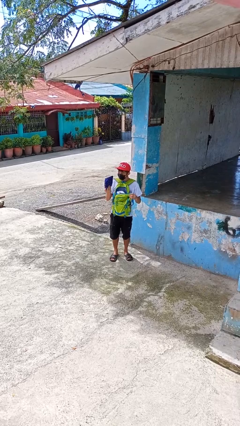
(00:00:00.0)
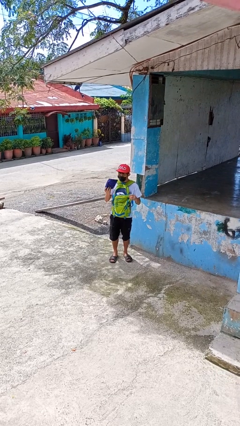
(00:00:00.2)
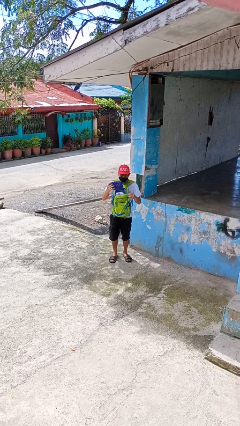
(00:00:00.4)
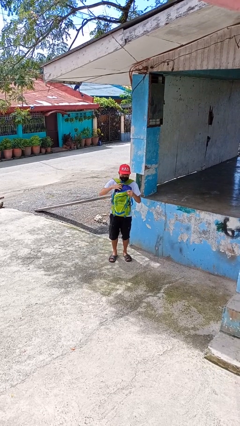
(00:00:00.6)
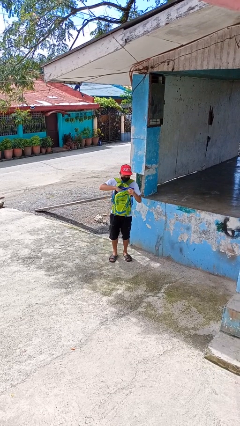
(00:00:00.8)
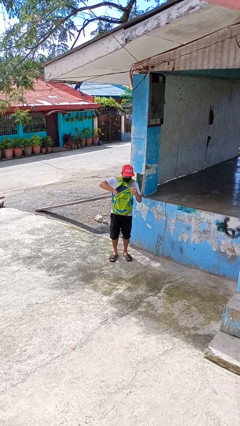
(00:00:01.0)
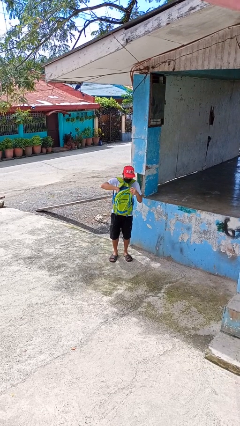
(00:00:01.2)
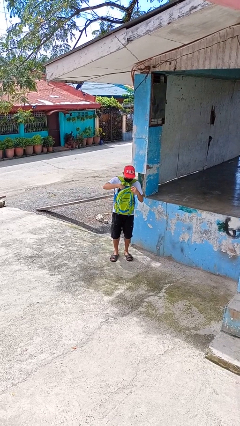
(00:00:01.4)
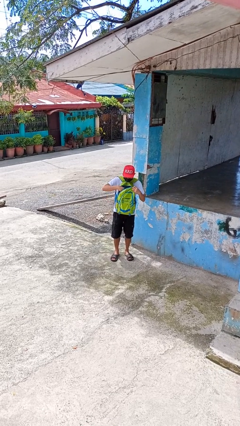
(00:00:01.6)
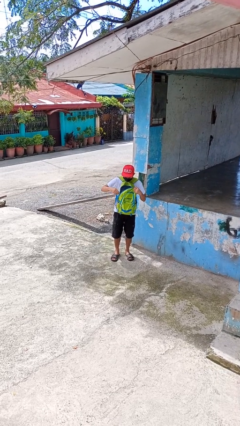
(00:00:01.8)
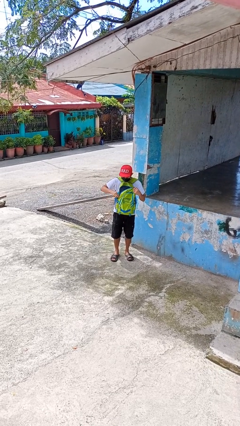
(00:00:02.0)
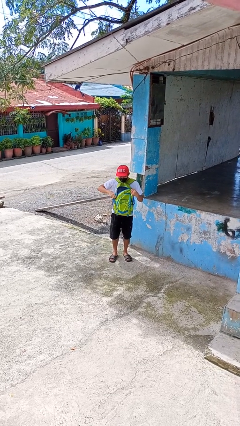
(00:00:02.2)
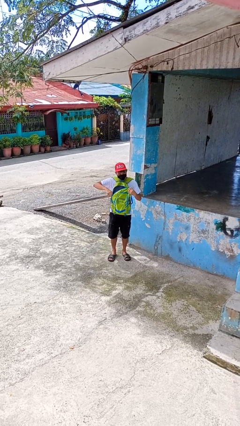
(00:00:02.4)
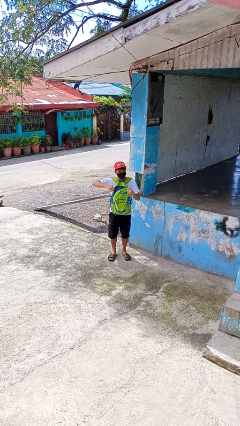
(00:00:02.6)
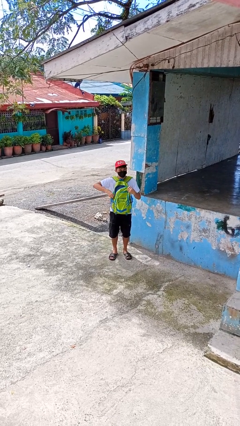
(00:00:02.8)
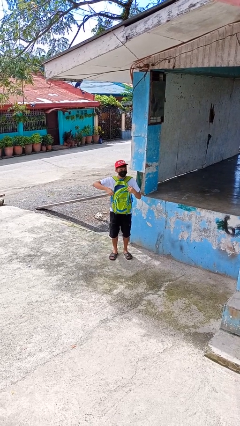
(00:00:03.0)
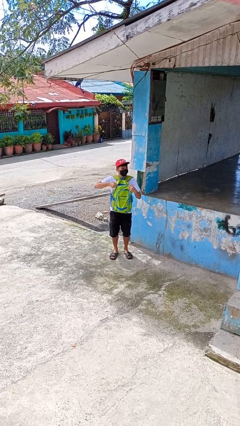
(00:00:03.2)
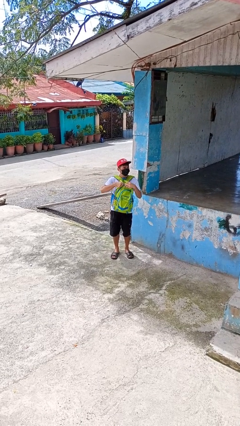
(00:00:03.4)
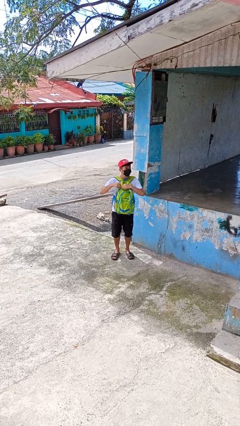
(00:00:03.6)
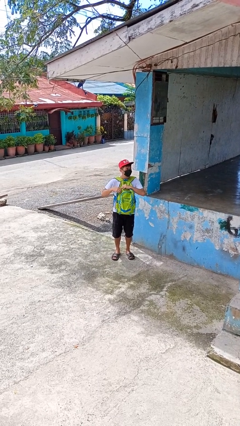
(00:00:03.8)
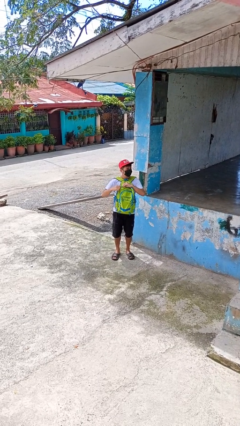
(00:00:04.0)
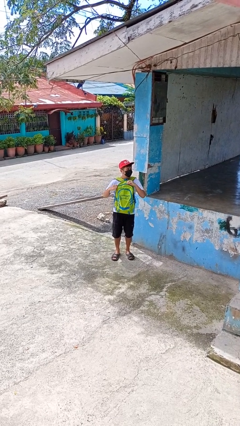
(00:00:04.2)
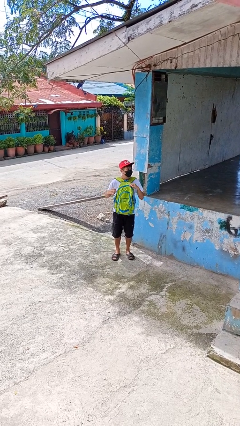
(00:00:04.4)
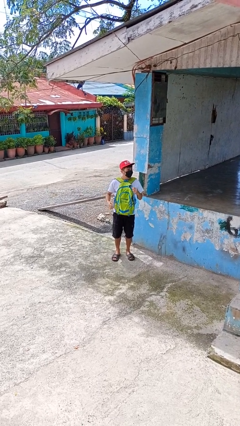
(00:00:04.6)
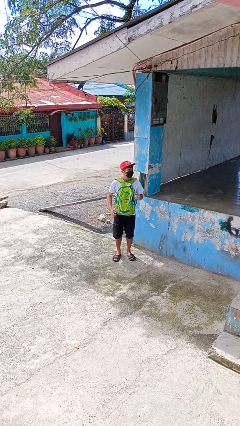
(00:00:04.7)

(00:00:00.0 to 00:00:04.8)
person puts object into backpack

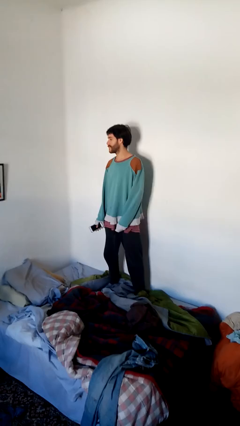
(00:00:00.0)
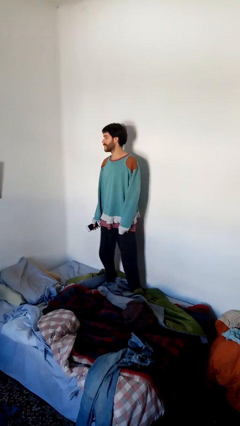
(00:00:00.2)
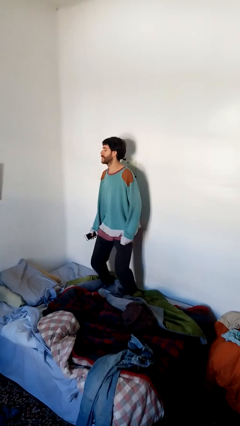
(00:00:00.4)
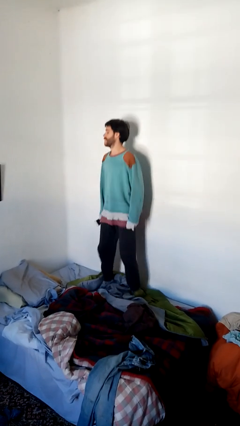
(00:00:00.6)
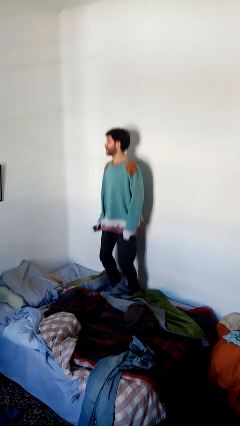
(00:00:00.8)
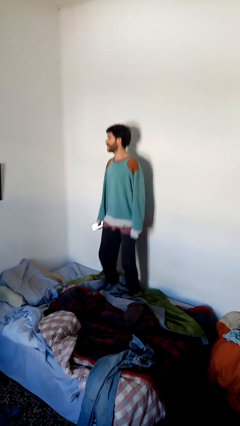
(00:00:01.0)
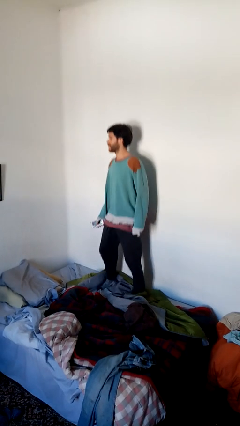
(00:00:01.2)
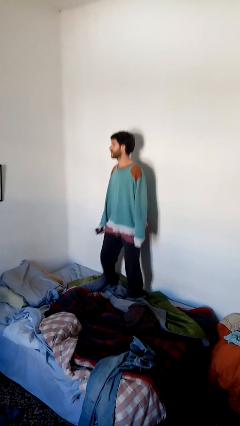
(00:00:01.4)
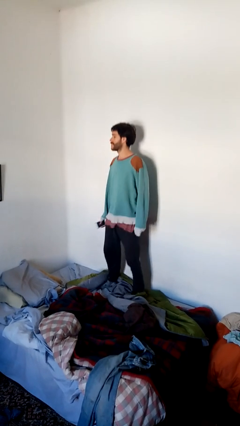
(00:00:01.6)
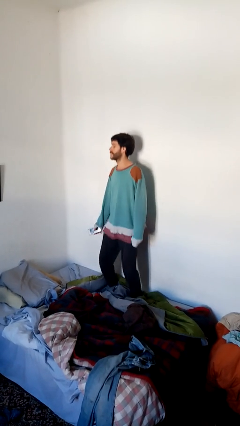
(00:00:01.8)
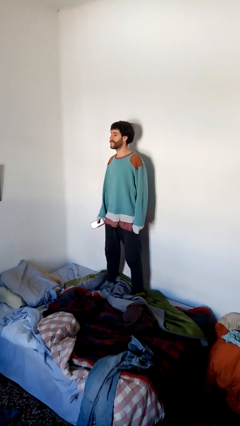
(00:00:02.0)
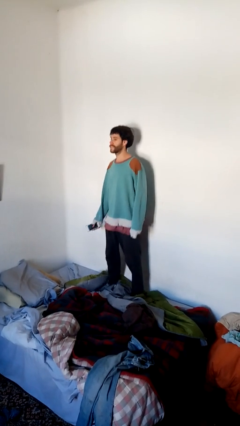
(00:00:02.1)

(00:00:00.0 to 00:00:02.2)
person jumps on bed

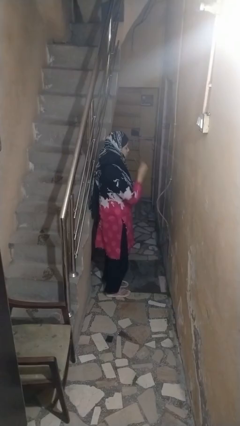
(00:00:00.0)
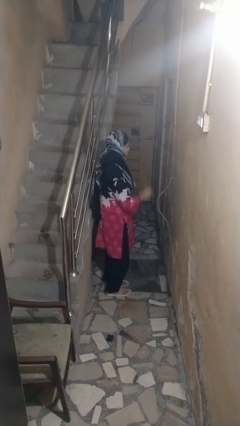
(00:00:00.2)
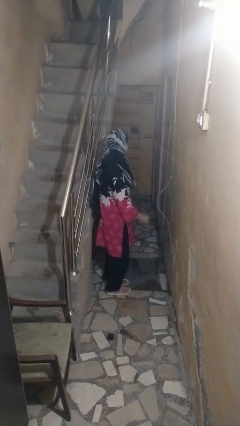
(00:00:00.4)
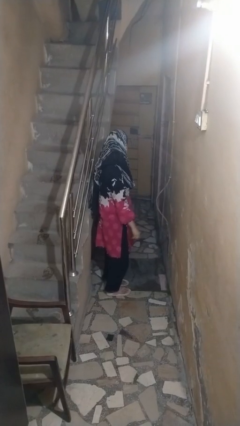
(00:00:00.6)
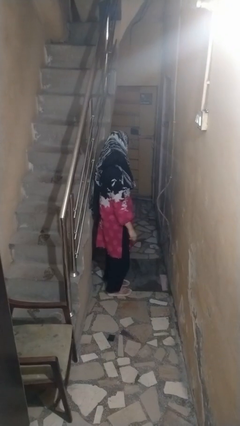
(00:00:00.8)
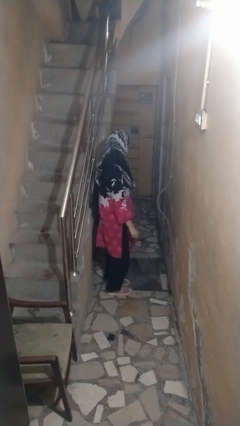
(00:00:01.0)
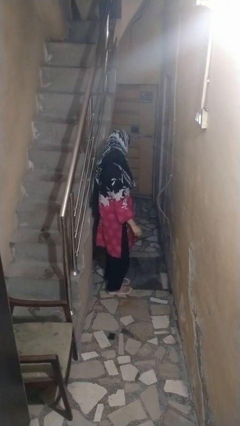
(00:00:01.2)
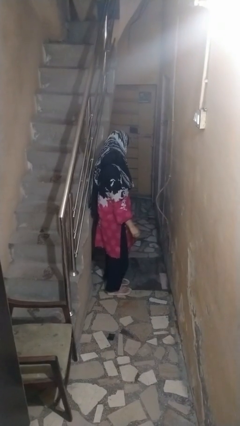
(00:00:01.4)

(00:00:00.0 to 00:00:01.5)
person takes off glasses

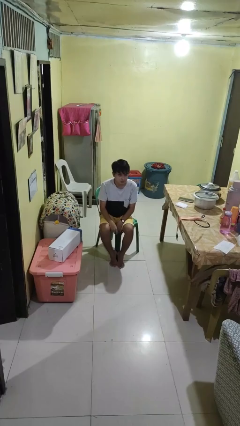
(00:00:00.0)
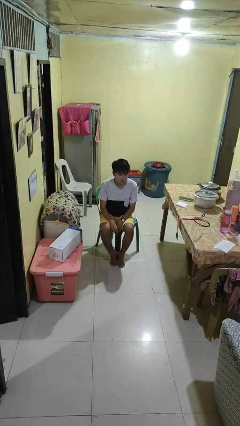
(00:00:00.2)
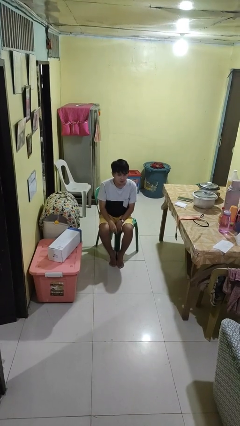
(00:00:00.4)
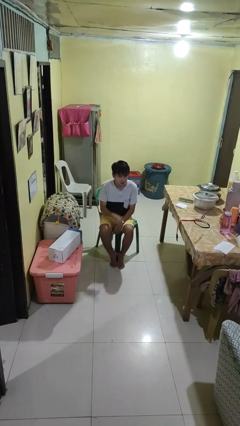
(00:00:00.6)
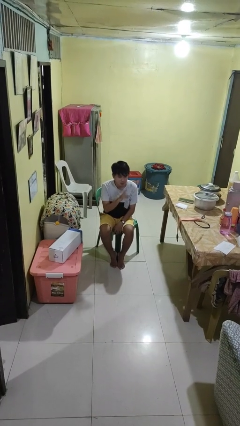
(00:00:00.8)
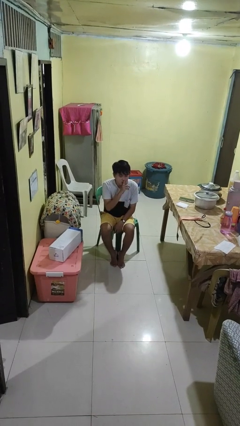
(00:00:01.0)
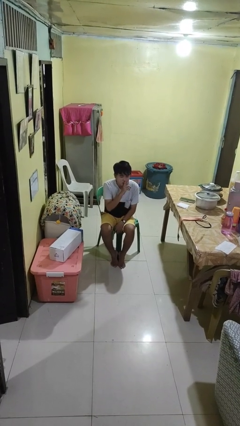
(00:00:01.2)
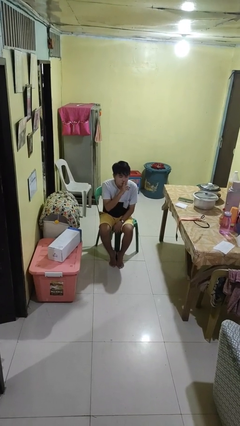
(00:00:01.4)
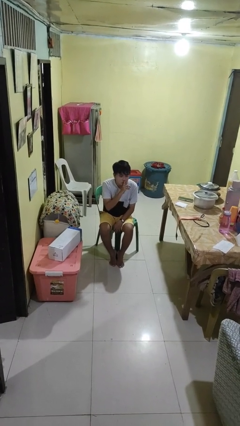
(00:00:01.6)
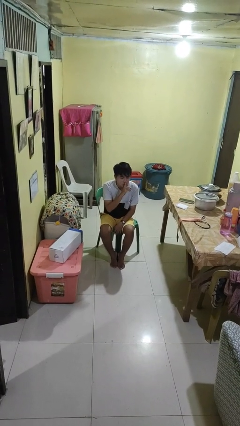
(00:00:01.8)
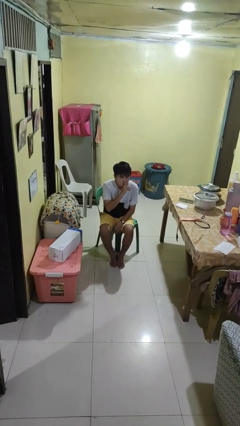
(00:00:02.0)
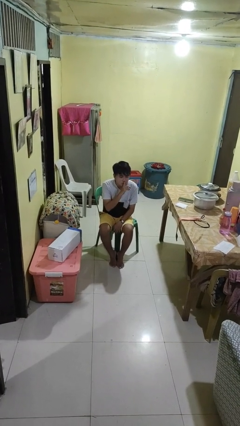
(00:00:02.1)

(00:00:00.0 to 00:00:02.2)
person gestures be quiet

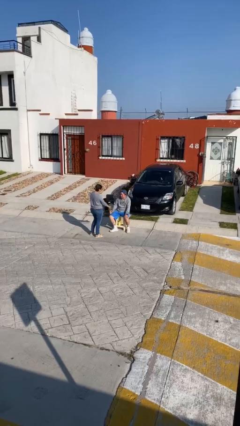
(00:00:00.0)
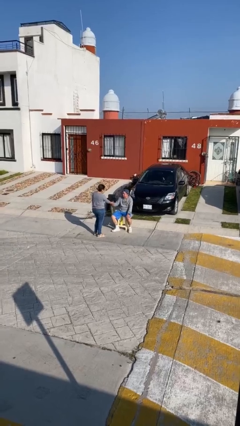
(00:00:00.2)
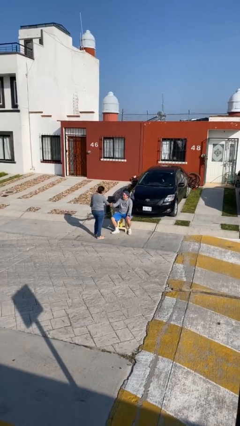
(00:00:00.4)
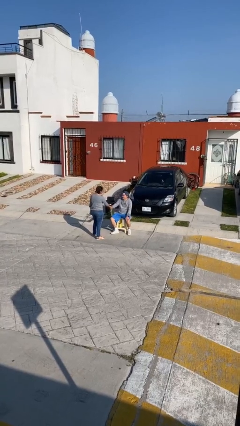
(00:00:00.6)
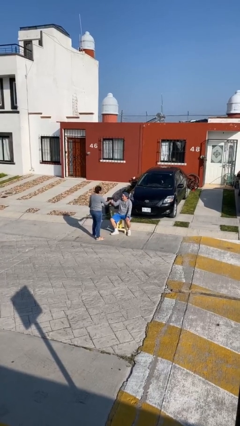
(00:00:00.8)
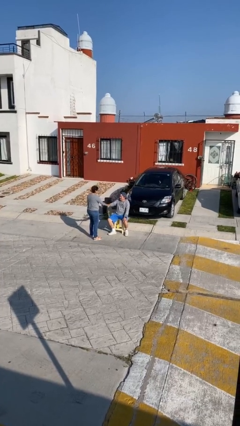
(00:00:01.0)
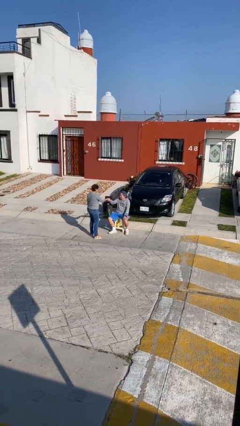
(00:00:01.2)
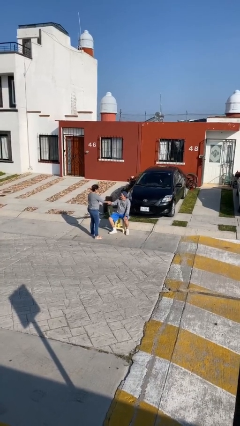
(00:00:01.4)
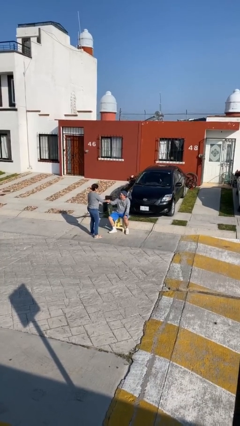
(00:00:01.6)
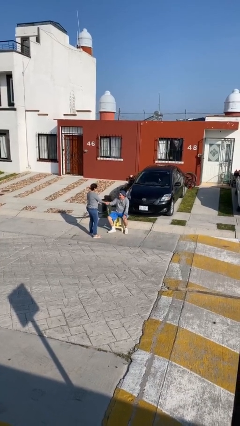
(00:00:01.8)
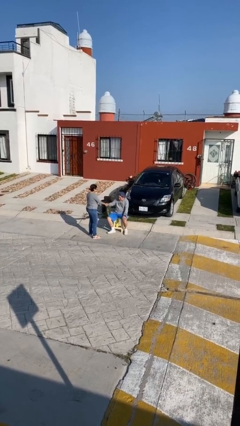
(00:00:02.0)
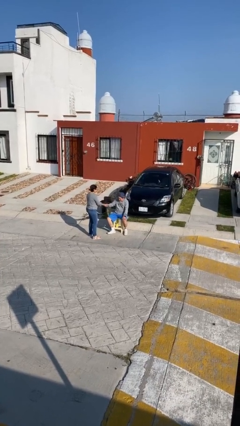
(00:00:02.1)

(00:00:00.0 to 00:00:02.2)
person shakes hand

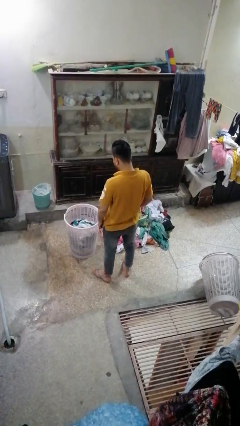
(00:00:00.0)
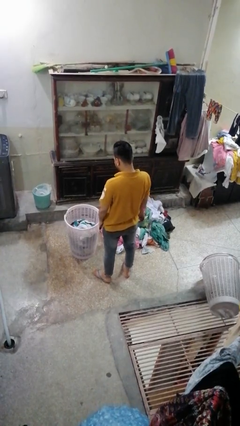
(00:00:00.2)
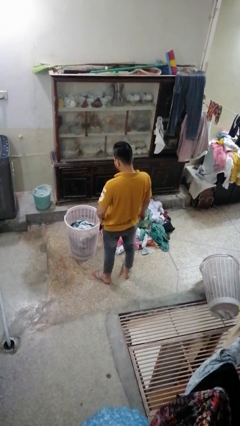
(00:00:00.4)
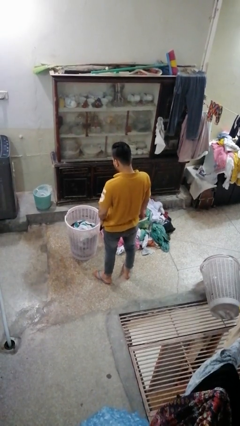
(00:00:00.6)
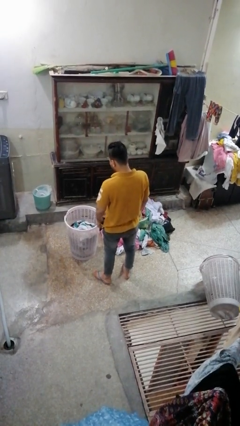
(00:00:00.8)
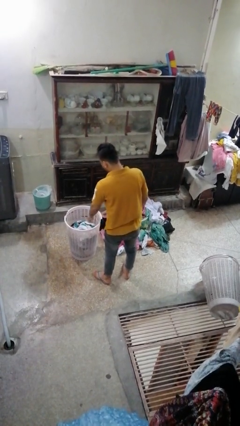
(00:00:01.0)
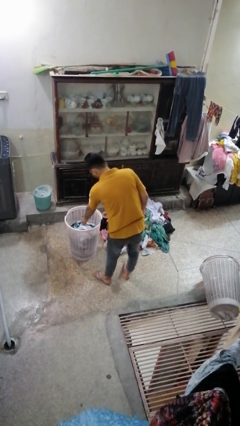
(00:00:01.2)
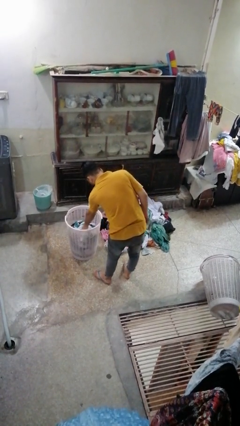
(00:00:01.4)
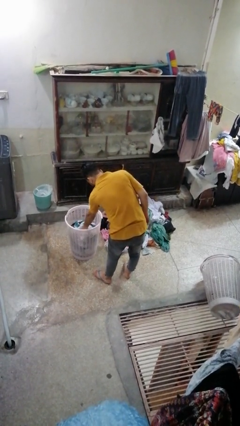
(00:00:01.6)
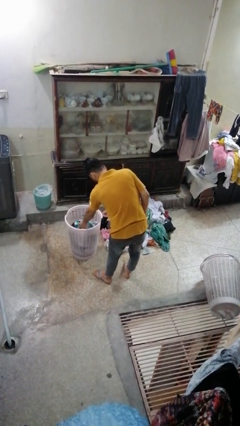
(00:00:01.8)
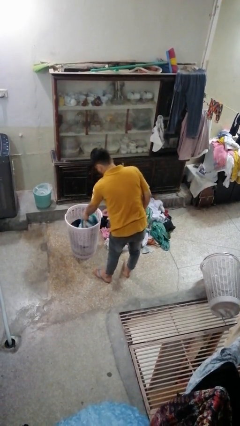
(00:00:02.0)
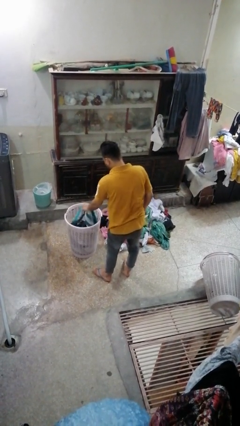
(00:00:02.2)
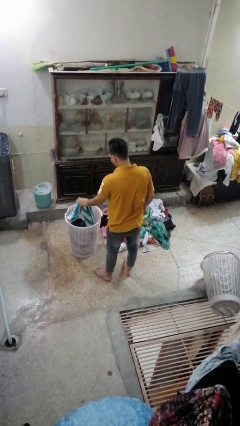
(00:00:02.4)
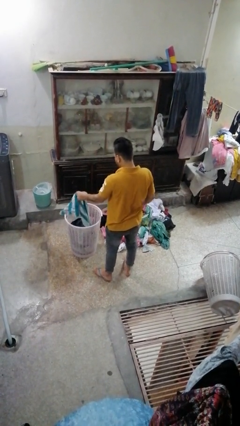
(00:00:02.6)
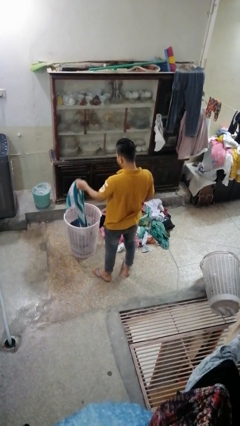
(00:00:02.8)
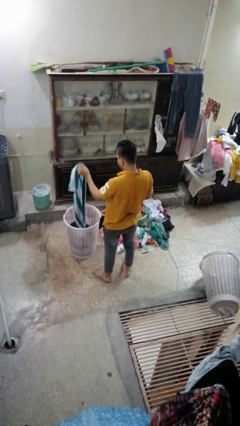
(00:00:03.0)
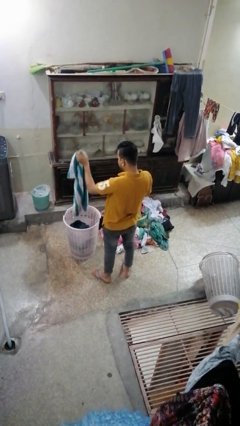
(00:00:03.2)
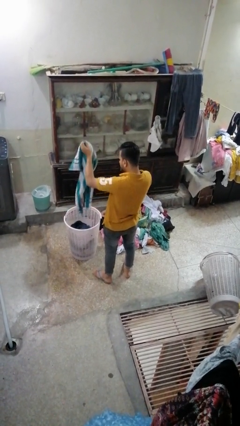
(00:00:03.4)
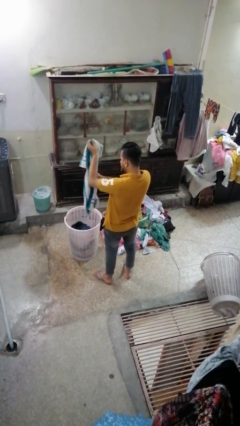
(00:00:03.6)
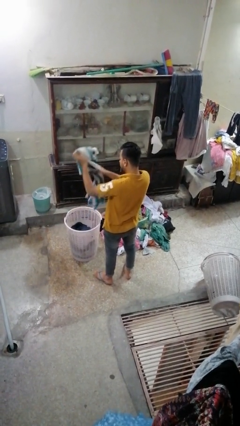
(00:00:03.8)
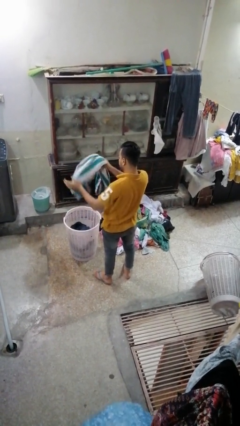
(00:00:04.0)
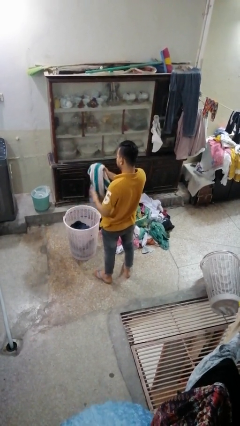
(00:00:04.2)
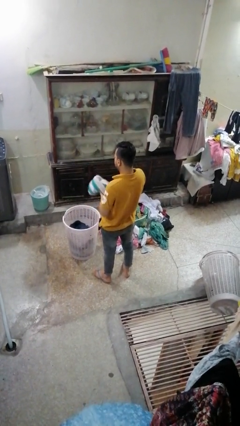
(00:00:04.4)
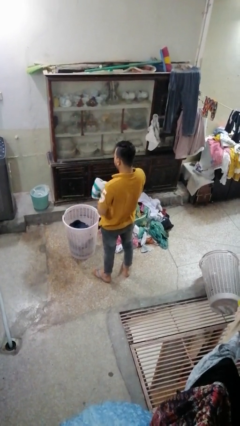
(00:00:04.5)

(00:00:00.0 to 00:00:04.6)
person takes object from basket
